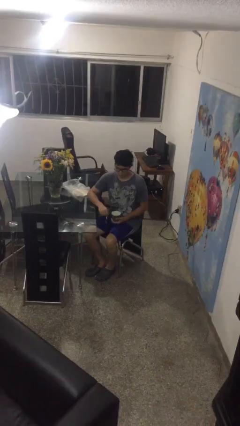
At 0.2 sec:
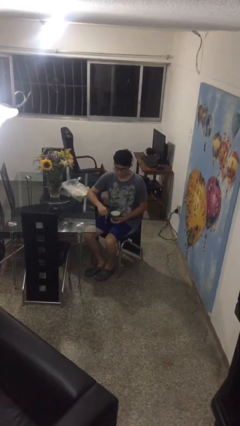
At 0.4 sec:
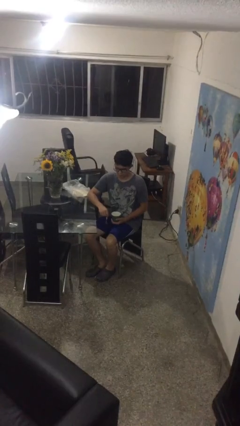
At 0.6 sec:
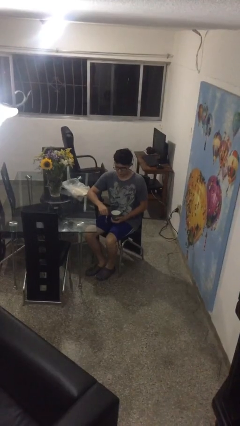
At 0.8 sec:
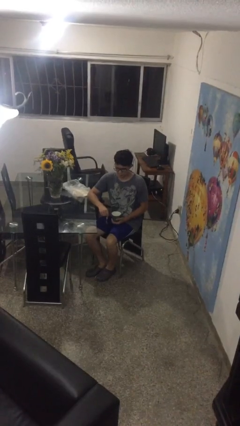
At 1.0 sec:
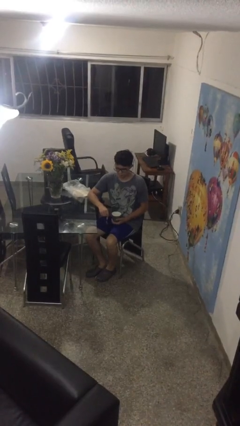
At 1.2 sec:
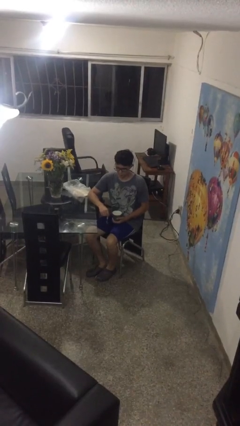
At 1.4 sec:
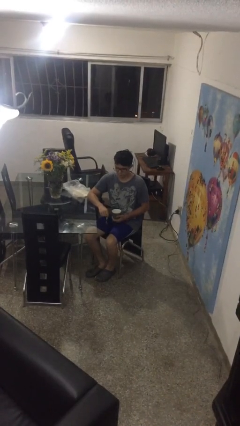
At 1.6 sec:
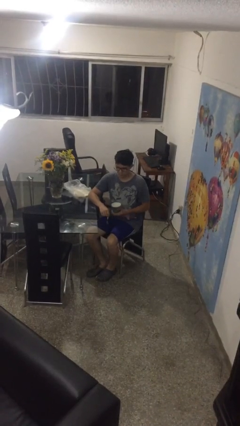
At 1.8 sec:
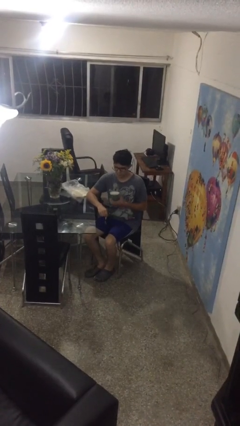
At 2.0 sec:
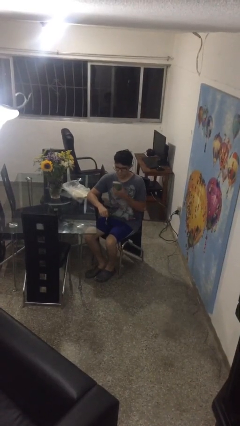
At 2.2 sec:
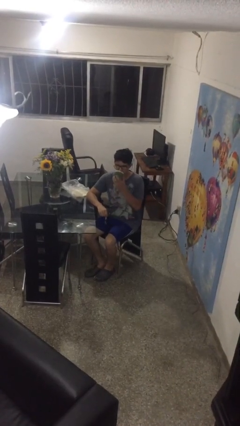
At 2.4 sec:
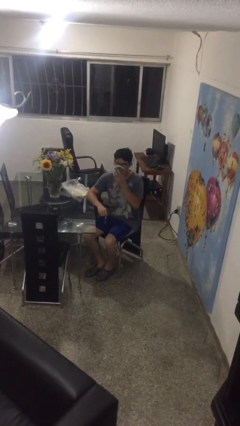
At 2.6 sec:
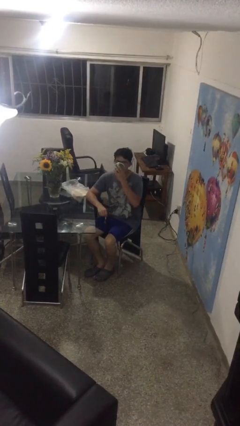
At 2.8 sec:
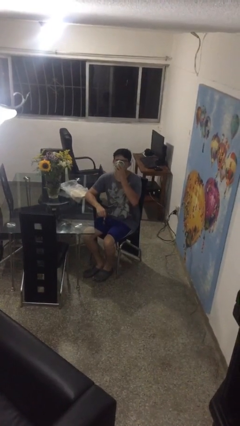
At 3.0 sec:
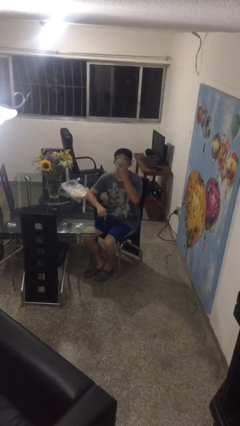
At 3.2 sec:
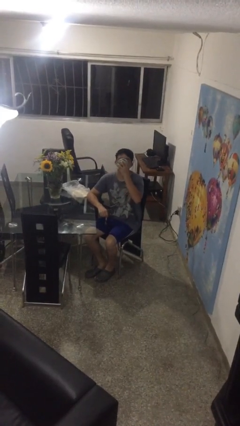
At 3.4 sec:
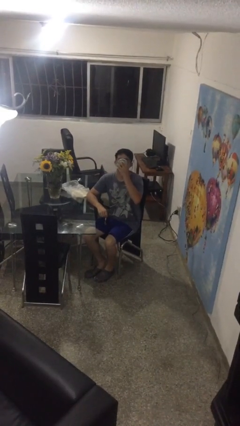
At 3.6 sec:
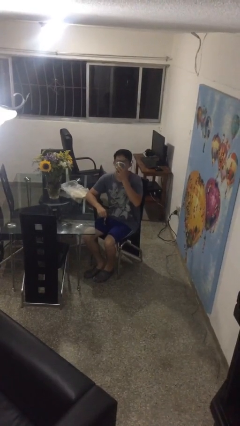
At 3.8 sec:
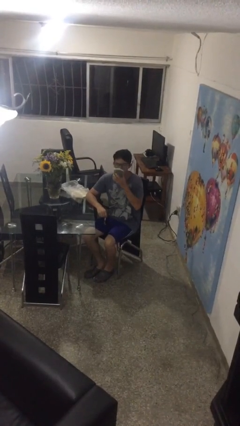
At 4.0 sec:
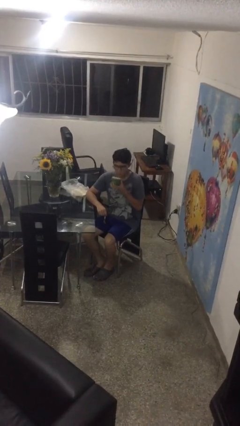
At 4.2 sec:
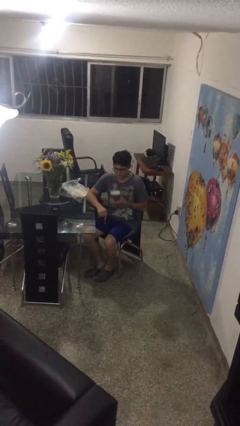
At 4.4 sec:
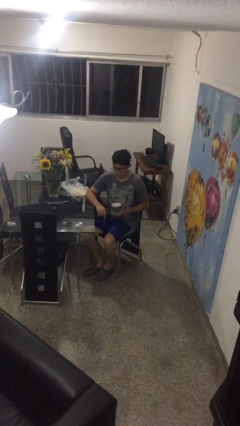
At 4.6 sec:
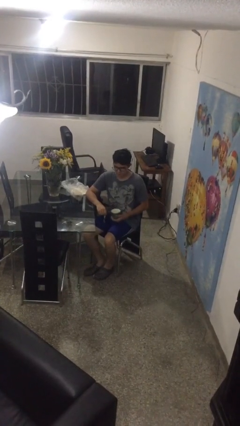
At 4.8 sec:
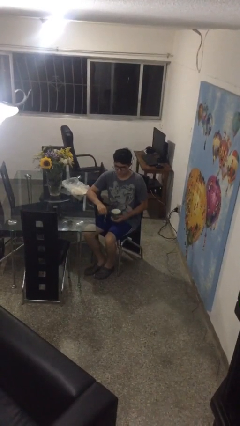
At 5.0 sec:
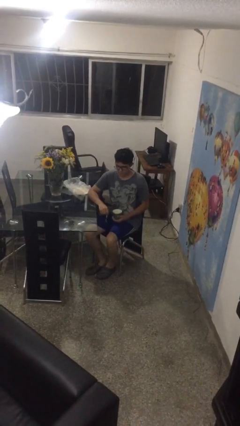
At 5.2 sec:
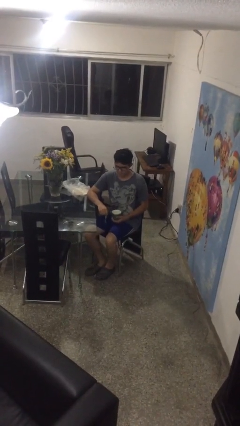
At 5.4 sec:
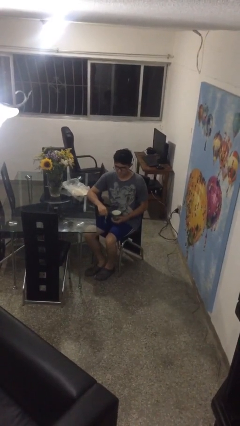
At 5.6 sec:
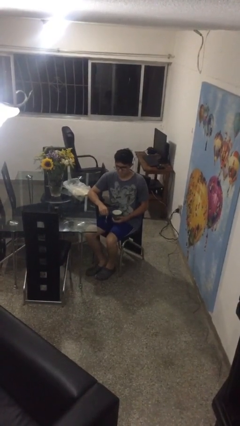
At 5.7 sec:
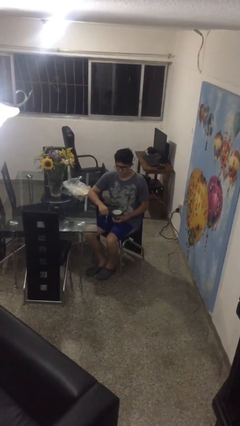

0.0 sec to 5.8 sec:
person drinks from mug

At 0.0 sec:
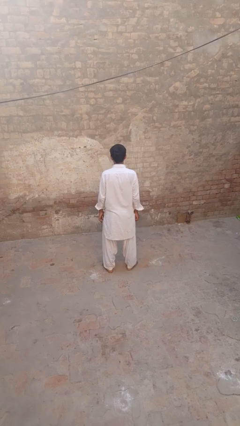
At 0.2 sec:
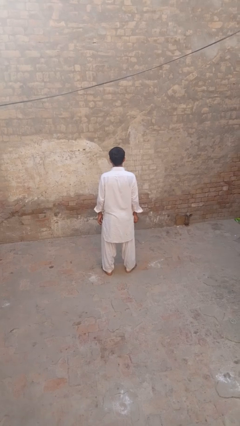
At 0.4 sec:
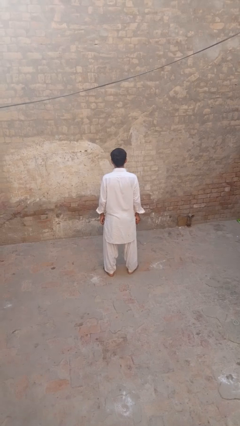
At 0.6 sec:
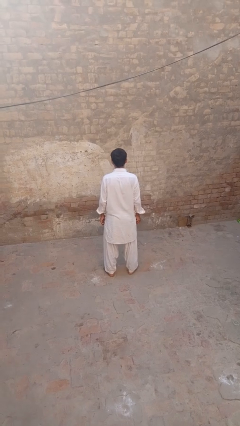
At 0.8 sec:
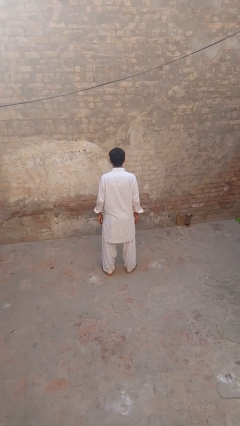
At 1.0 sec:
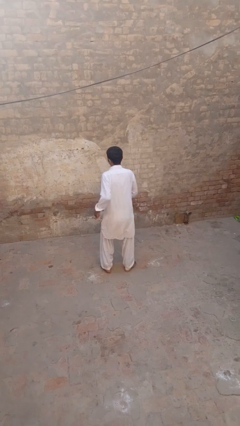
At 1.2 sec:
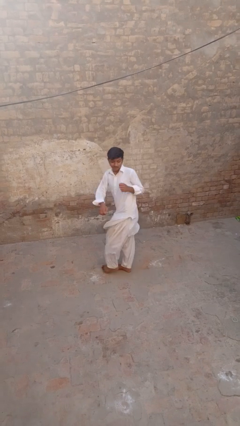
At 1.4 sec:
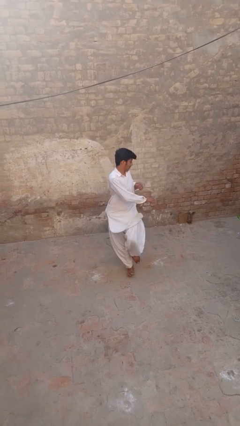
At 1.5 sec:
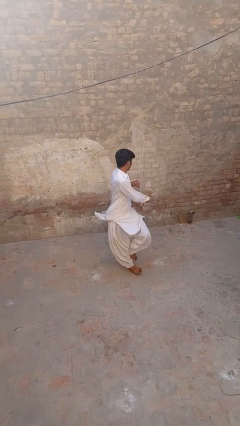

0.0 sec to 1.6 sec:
person twirls

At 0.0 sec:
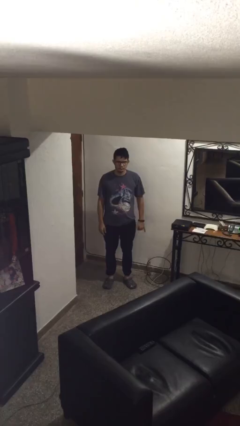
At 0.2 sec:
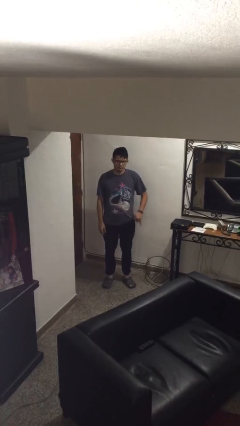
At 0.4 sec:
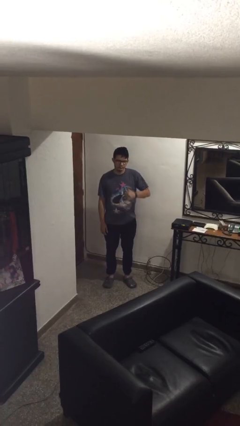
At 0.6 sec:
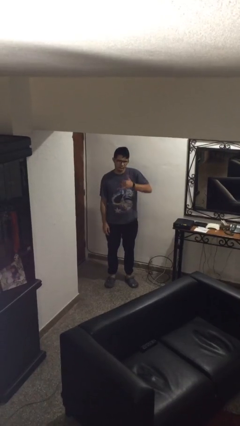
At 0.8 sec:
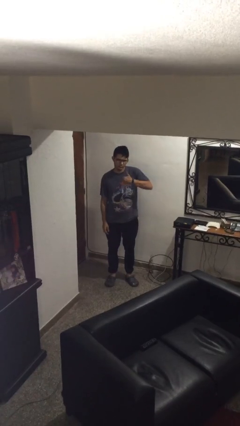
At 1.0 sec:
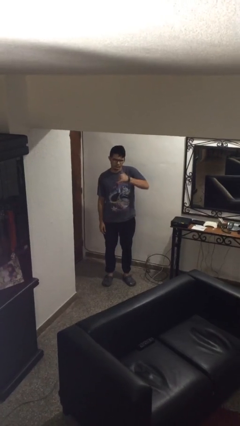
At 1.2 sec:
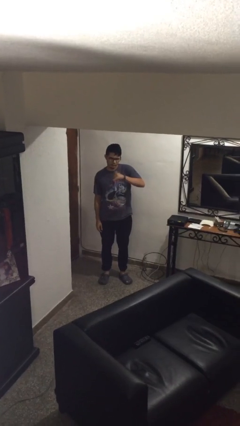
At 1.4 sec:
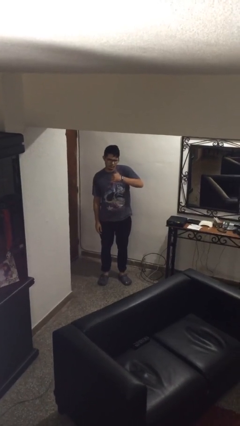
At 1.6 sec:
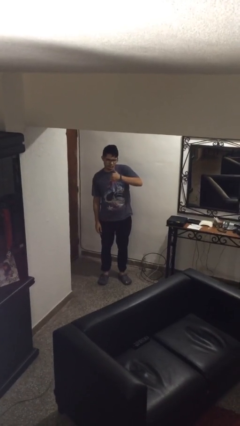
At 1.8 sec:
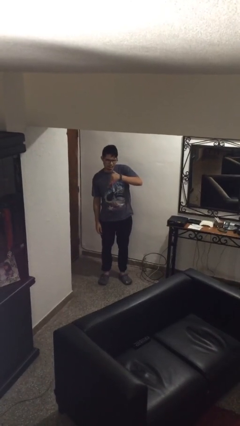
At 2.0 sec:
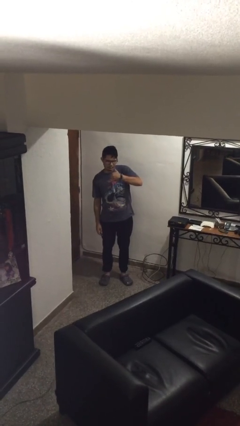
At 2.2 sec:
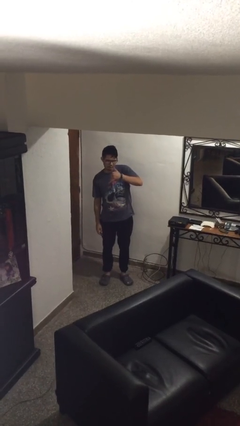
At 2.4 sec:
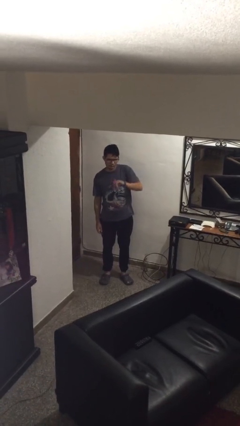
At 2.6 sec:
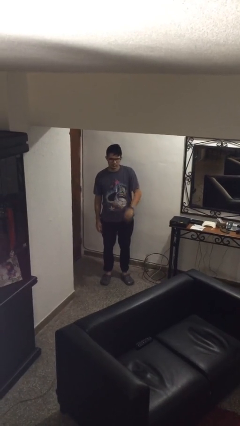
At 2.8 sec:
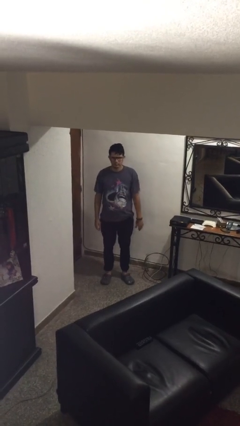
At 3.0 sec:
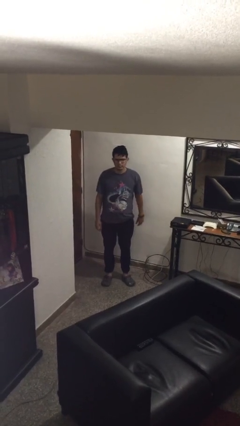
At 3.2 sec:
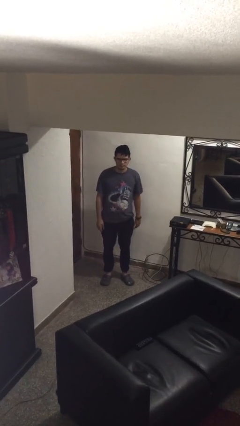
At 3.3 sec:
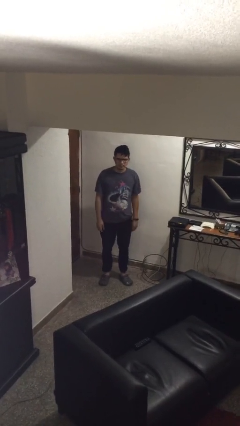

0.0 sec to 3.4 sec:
person gestures hang loose

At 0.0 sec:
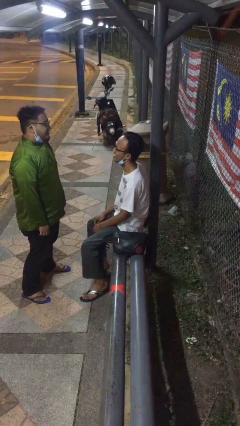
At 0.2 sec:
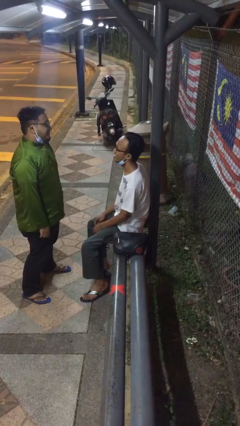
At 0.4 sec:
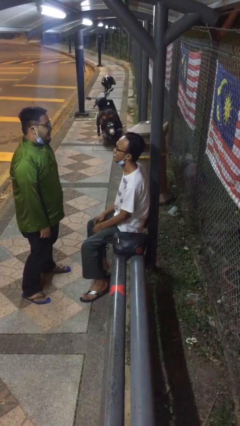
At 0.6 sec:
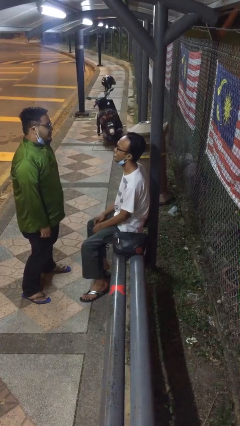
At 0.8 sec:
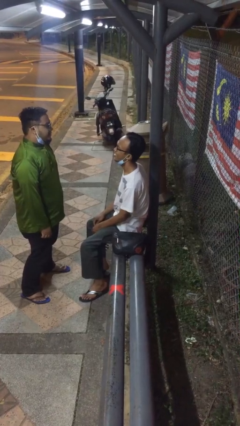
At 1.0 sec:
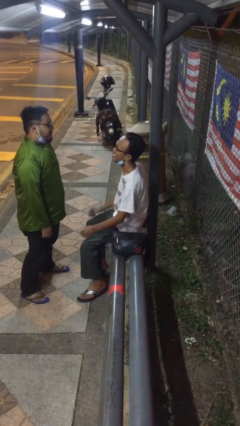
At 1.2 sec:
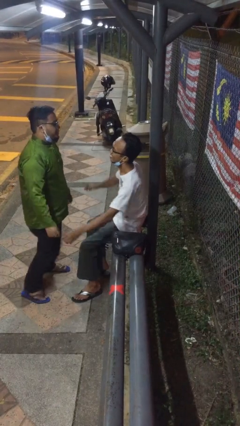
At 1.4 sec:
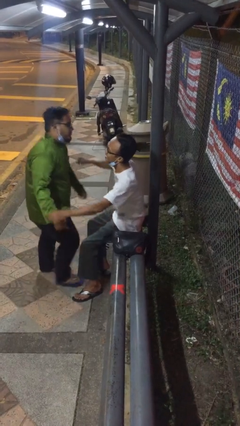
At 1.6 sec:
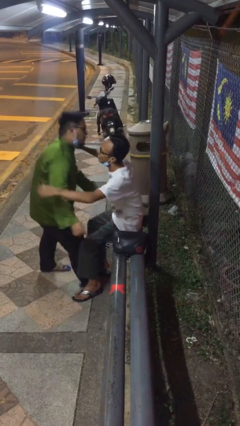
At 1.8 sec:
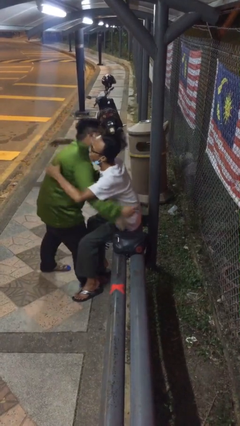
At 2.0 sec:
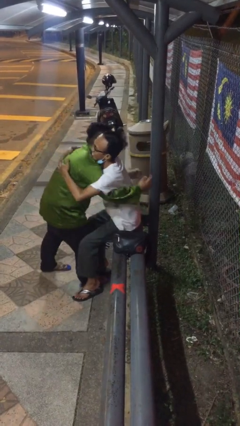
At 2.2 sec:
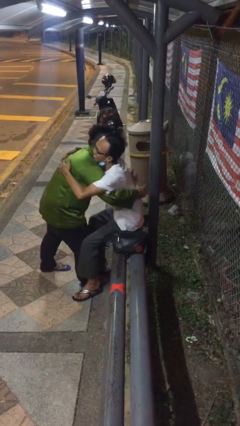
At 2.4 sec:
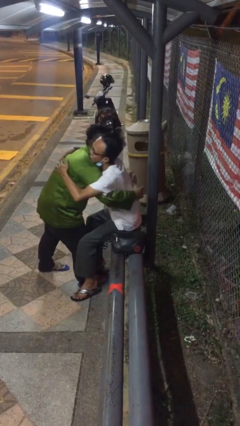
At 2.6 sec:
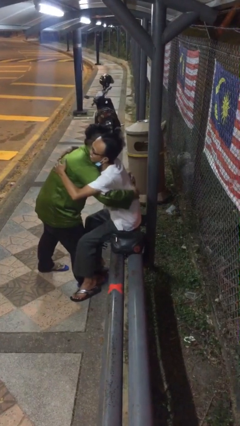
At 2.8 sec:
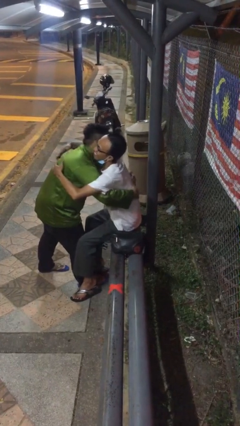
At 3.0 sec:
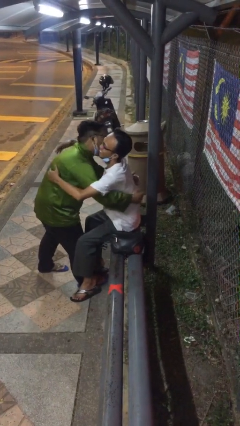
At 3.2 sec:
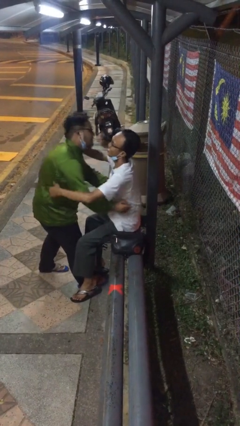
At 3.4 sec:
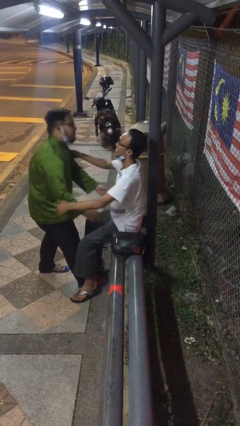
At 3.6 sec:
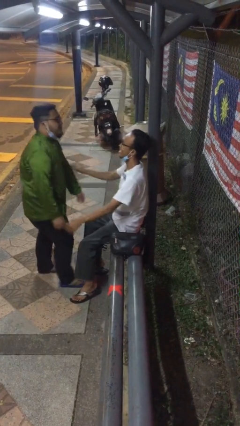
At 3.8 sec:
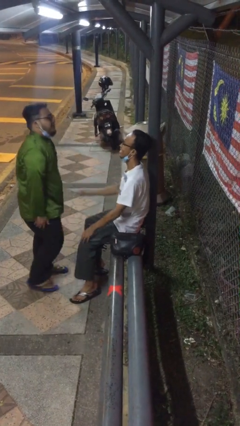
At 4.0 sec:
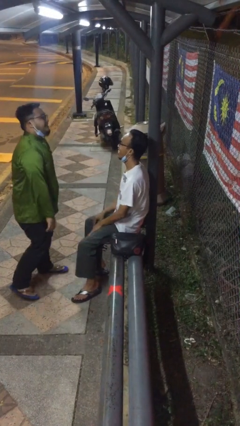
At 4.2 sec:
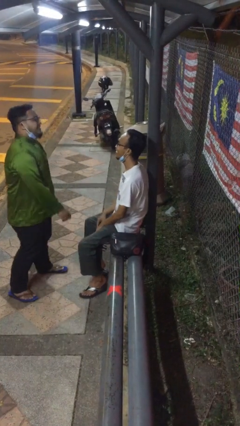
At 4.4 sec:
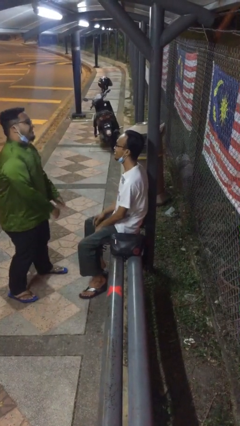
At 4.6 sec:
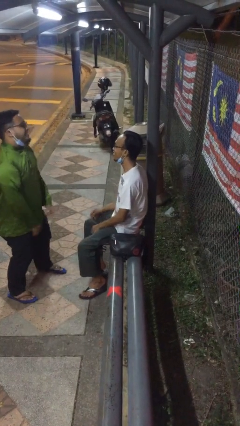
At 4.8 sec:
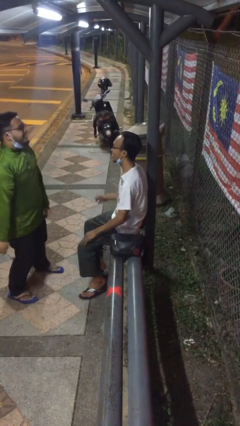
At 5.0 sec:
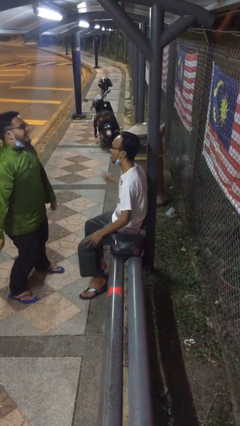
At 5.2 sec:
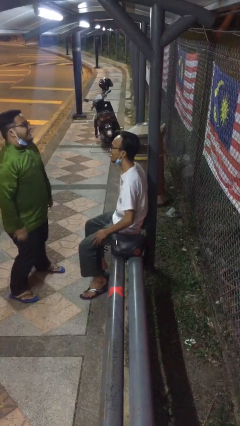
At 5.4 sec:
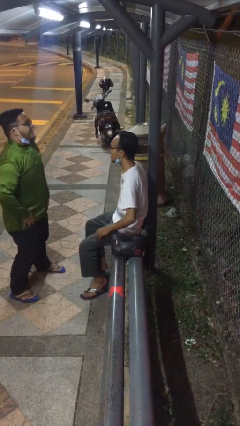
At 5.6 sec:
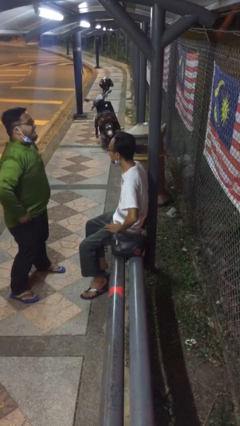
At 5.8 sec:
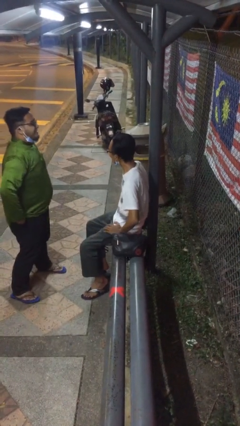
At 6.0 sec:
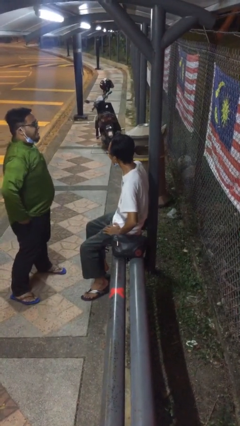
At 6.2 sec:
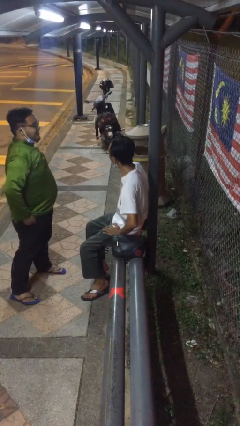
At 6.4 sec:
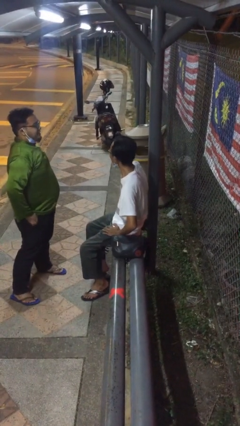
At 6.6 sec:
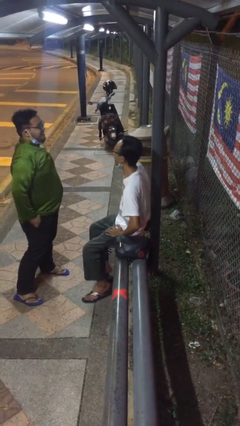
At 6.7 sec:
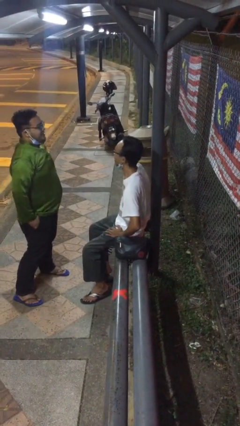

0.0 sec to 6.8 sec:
person embraces person
